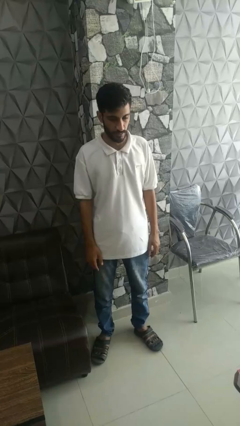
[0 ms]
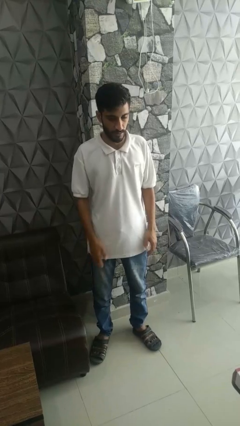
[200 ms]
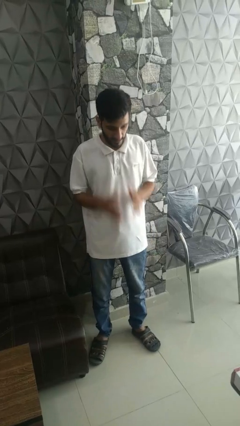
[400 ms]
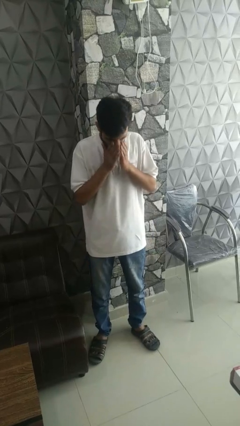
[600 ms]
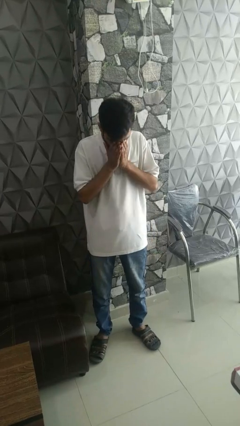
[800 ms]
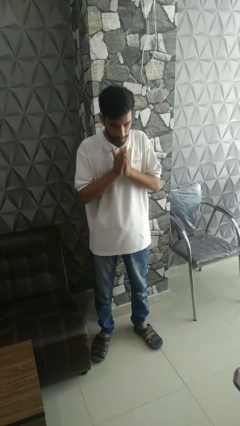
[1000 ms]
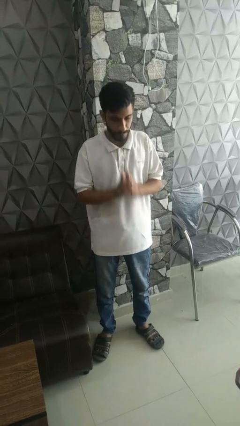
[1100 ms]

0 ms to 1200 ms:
person sneezes into hand

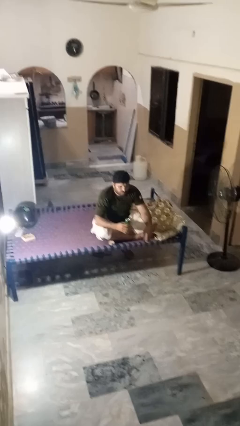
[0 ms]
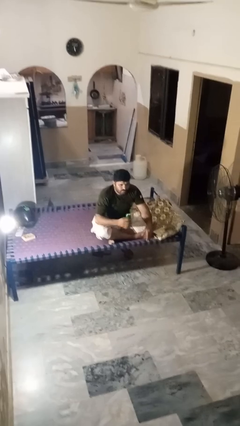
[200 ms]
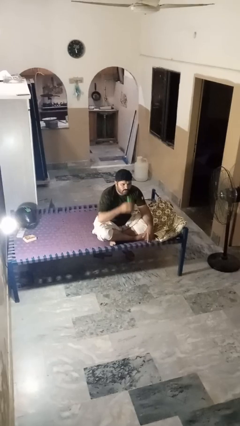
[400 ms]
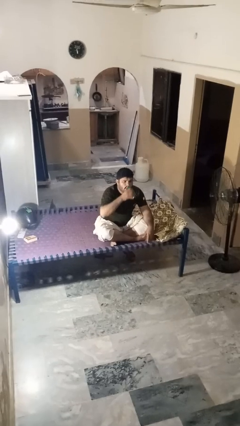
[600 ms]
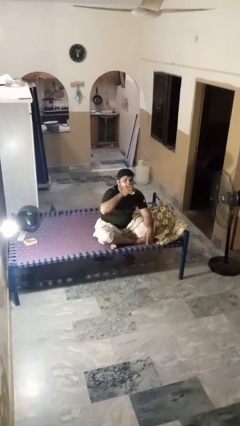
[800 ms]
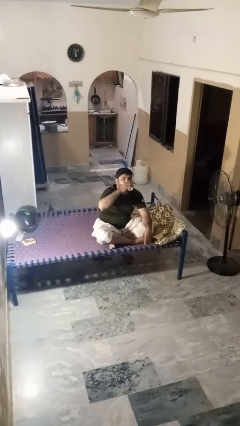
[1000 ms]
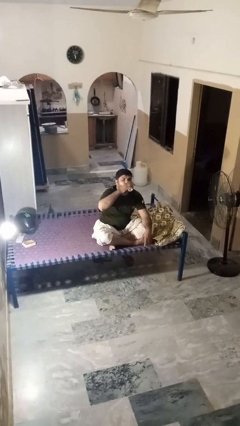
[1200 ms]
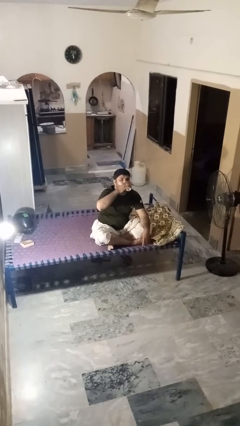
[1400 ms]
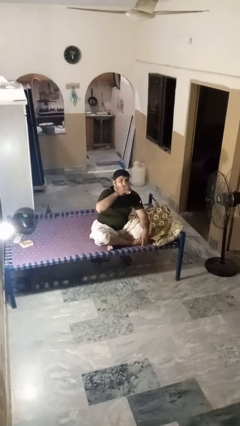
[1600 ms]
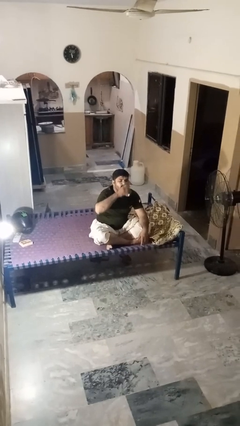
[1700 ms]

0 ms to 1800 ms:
person drinks from beverage can

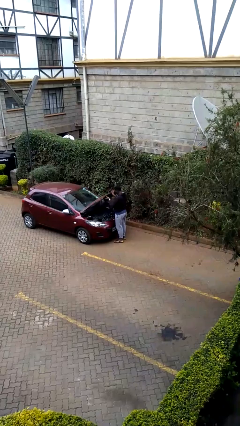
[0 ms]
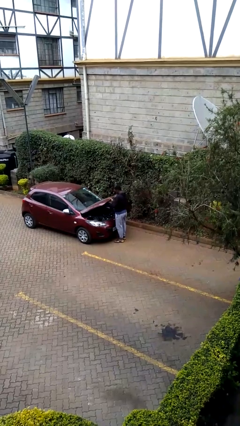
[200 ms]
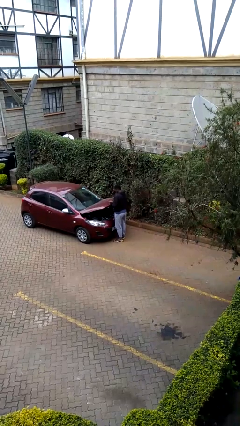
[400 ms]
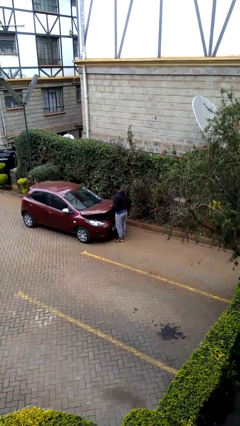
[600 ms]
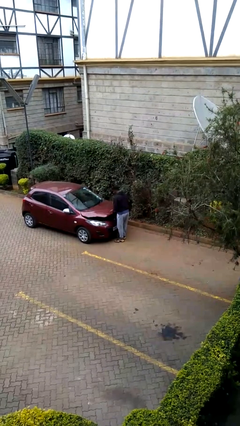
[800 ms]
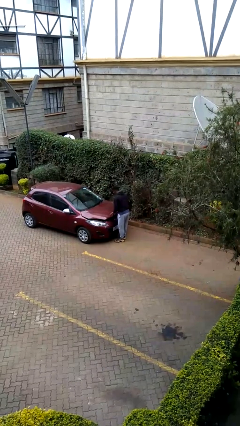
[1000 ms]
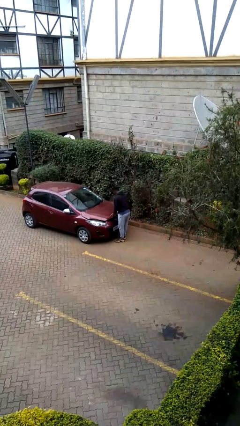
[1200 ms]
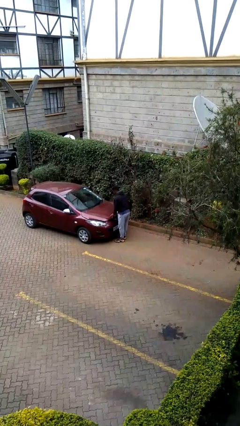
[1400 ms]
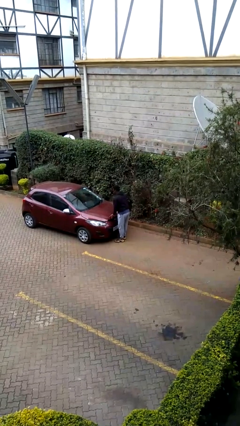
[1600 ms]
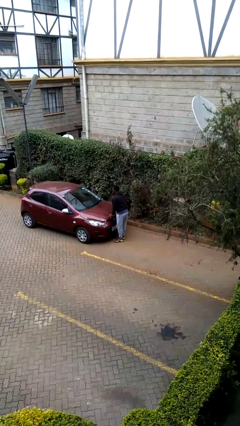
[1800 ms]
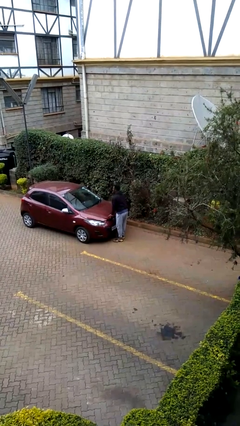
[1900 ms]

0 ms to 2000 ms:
person closes car hood

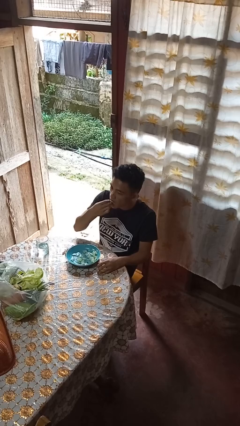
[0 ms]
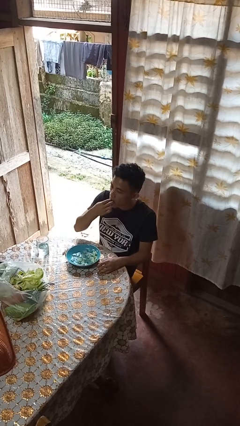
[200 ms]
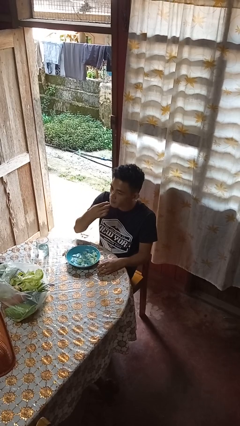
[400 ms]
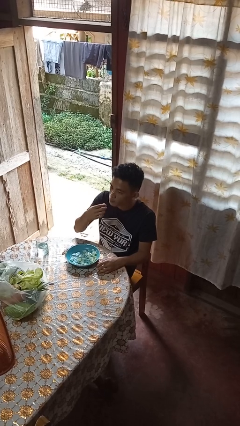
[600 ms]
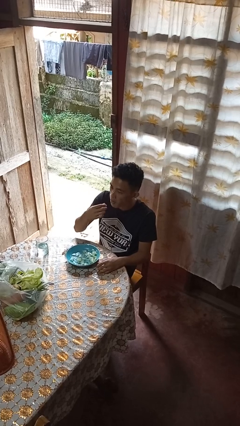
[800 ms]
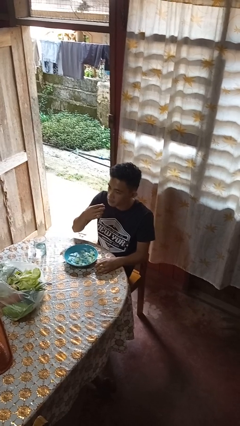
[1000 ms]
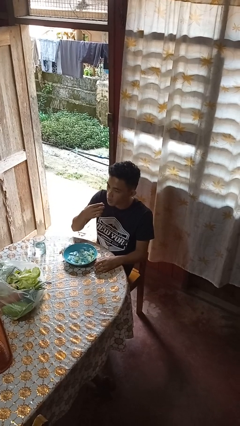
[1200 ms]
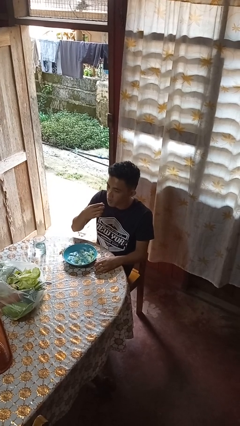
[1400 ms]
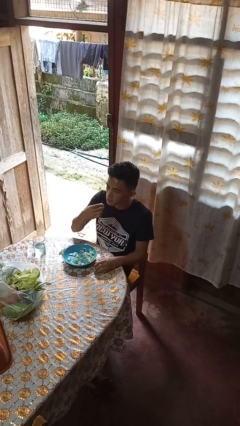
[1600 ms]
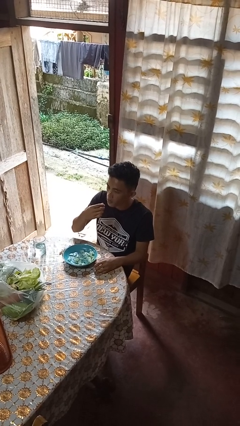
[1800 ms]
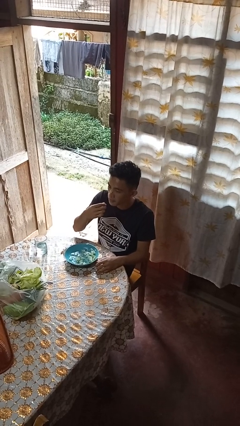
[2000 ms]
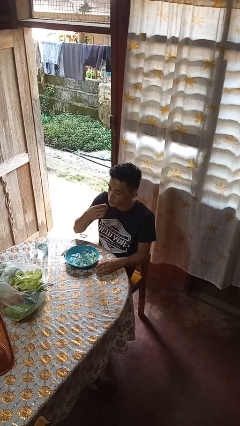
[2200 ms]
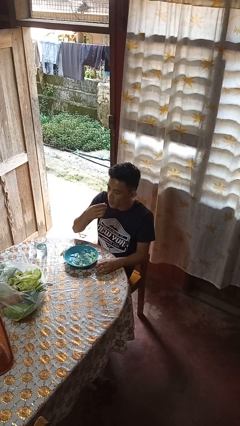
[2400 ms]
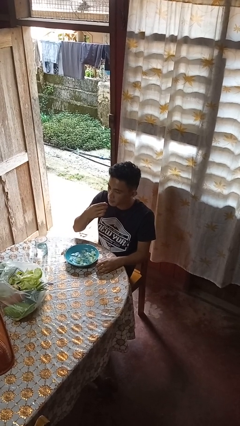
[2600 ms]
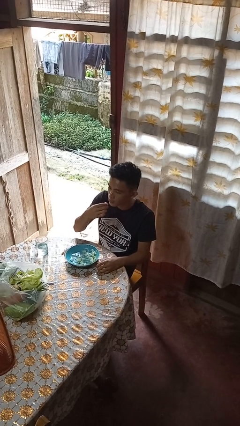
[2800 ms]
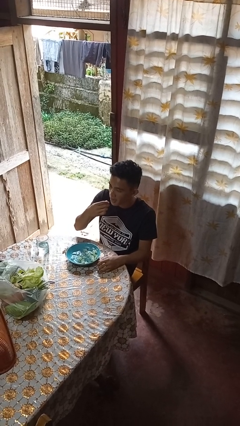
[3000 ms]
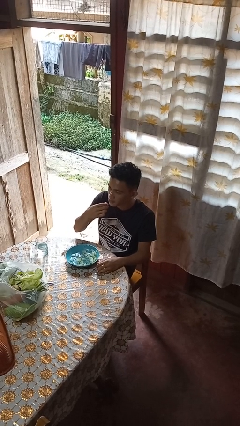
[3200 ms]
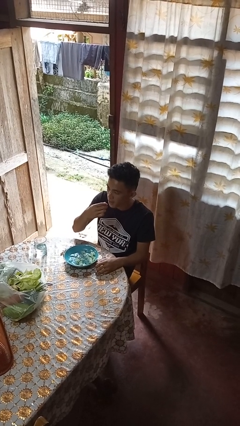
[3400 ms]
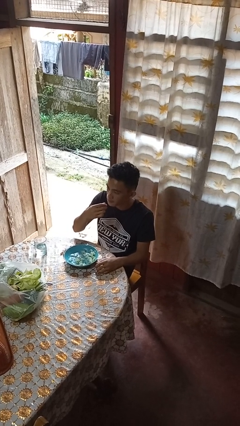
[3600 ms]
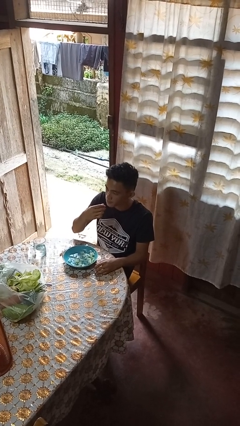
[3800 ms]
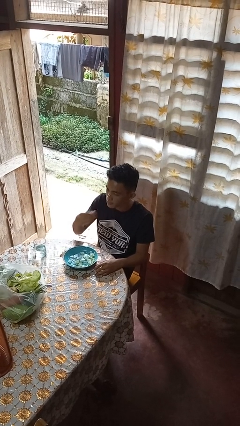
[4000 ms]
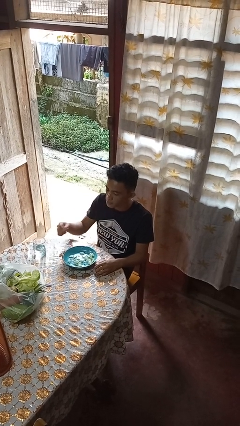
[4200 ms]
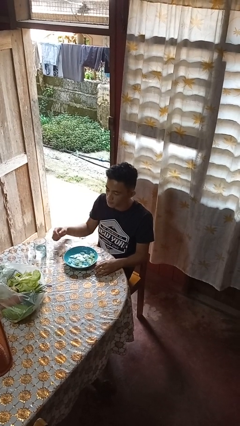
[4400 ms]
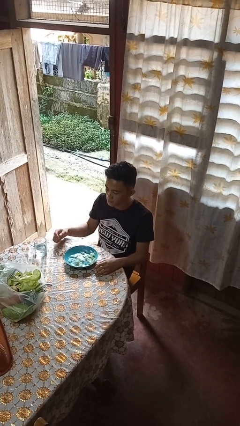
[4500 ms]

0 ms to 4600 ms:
person eats with hands

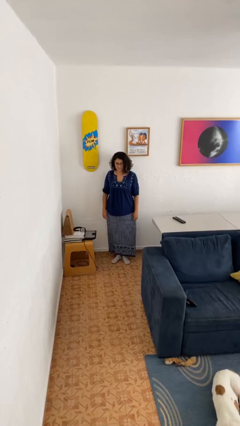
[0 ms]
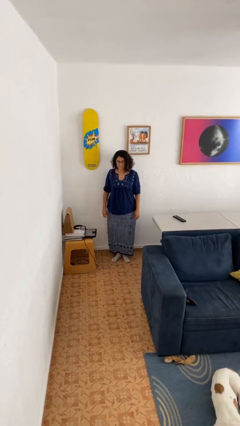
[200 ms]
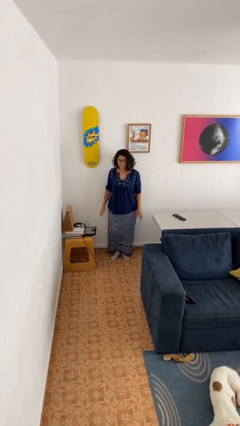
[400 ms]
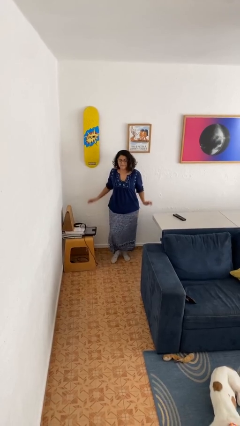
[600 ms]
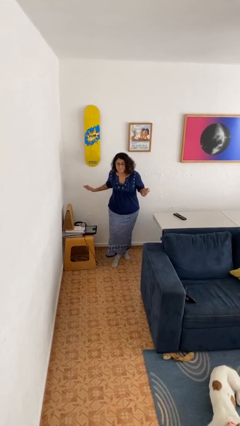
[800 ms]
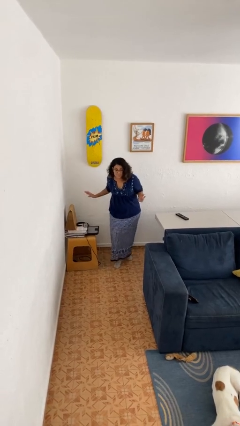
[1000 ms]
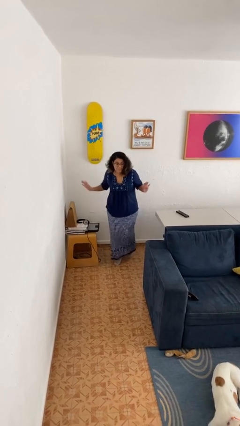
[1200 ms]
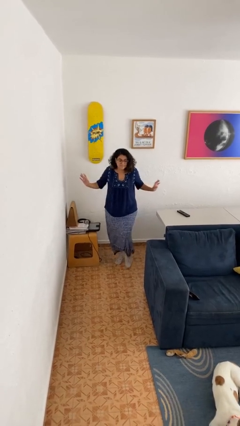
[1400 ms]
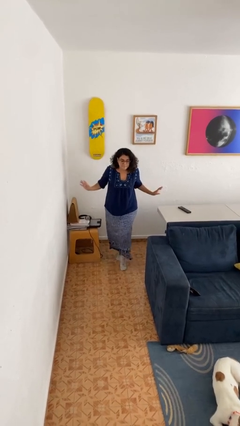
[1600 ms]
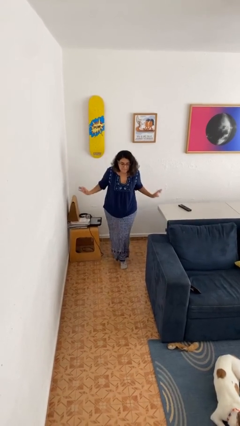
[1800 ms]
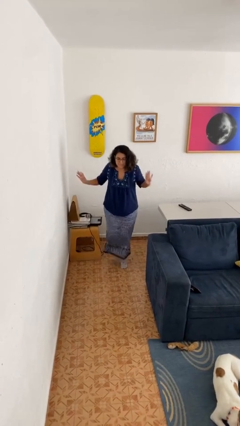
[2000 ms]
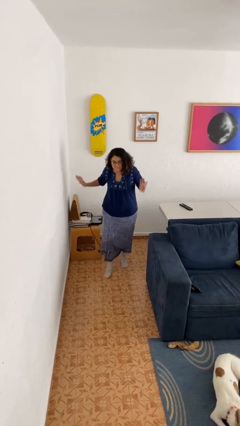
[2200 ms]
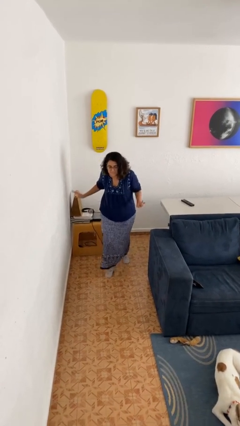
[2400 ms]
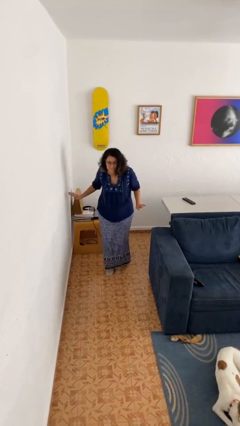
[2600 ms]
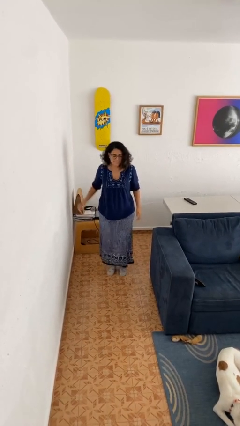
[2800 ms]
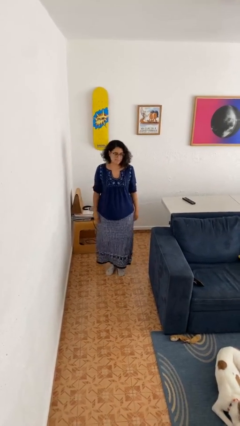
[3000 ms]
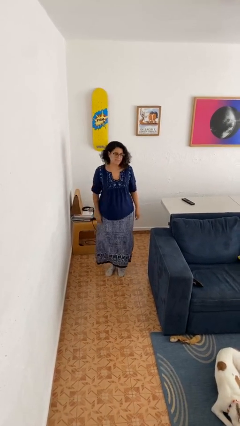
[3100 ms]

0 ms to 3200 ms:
person walks tiptoe

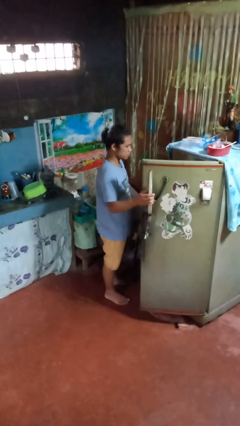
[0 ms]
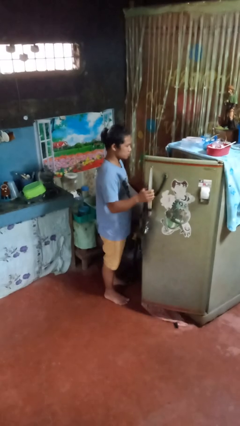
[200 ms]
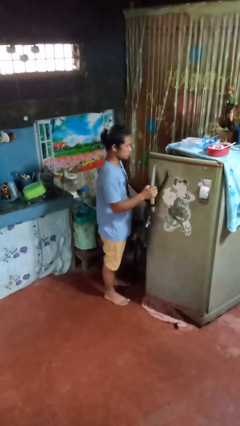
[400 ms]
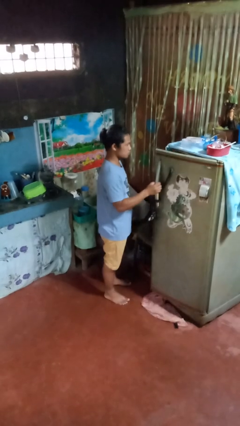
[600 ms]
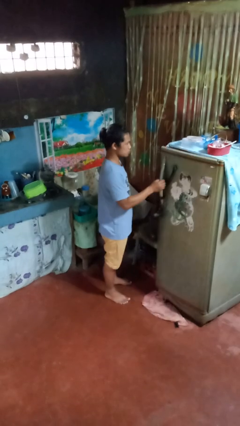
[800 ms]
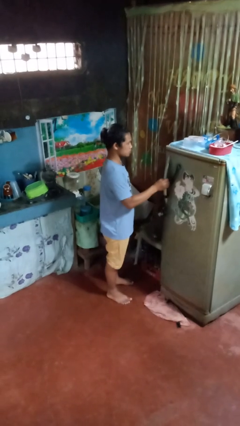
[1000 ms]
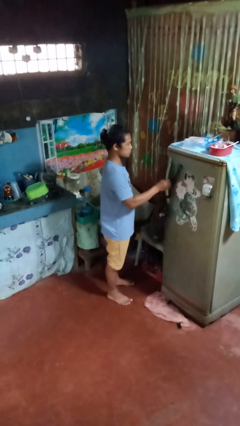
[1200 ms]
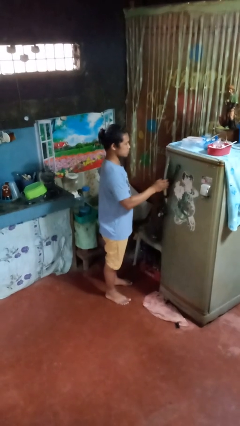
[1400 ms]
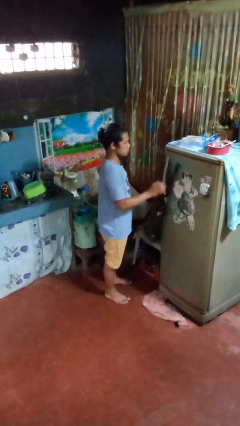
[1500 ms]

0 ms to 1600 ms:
person closes refrigerator

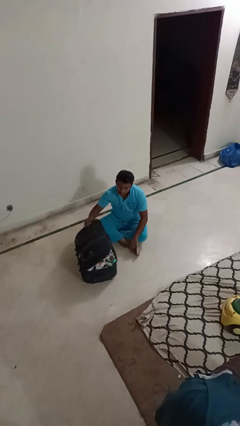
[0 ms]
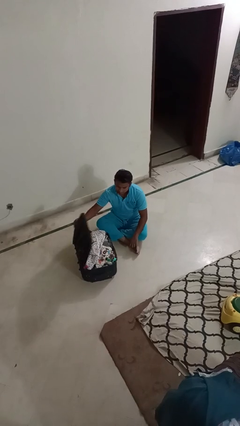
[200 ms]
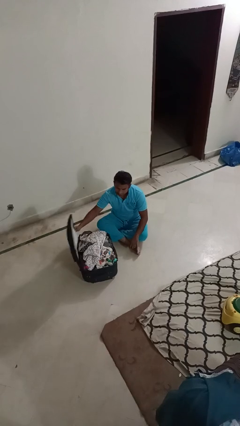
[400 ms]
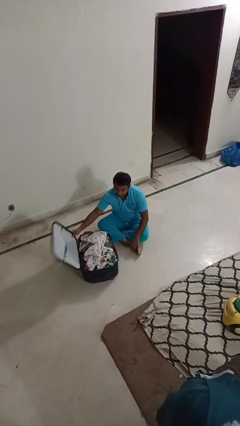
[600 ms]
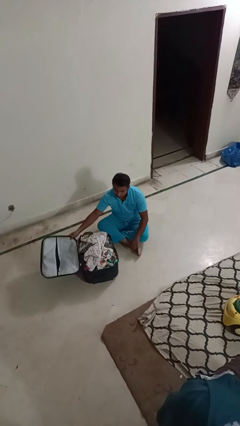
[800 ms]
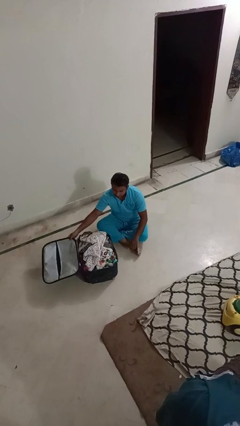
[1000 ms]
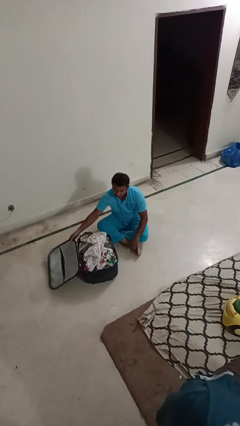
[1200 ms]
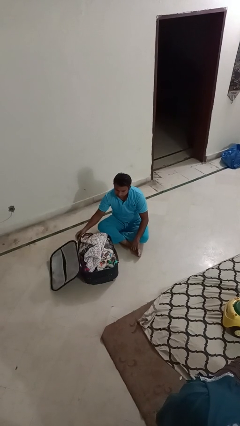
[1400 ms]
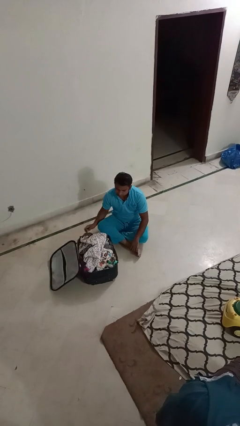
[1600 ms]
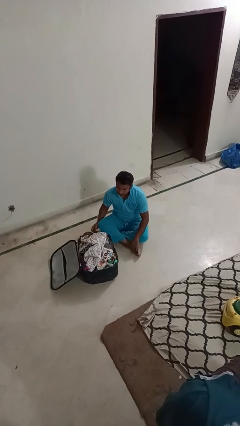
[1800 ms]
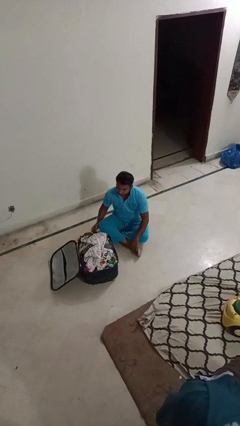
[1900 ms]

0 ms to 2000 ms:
person opens suitcase

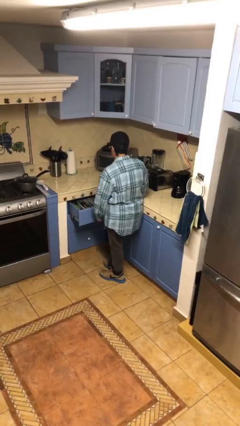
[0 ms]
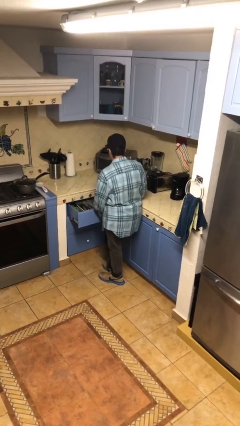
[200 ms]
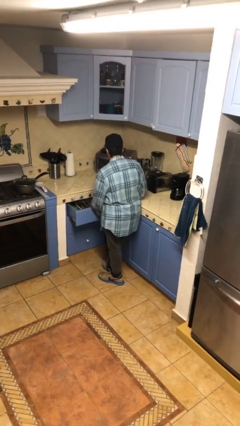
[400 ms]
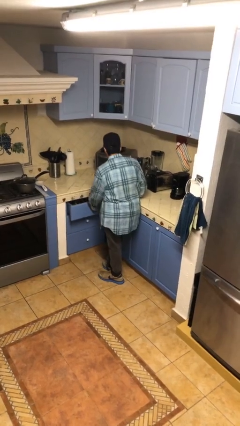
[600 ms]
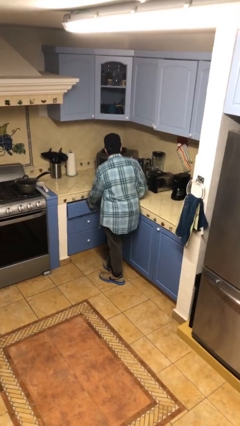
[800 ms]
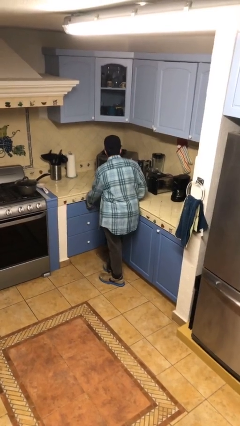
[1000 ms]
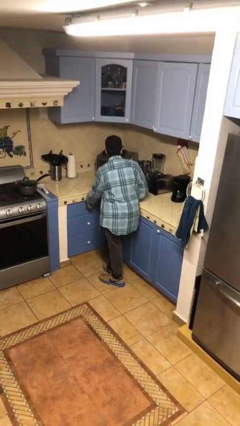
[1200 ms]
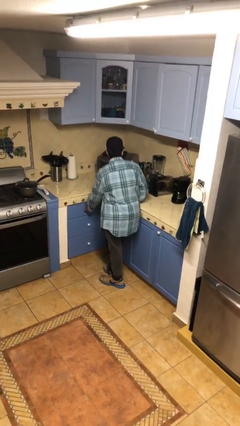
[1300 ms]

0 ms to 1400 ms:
person closes kitchen drawer
